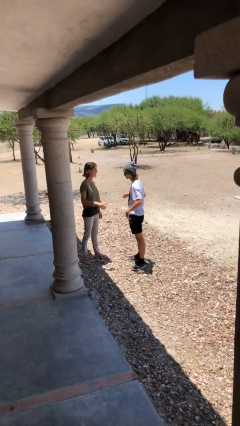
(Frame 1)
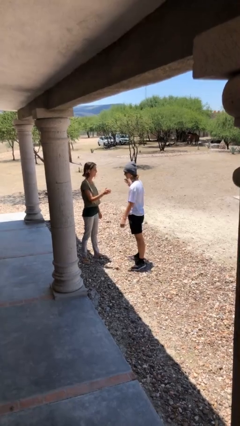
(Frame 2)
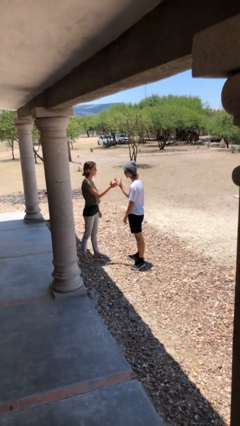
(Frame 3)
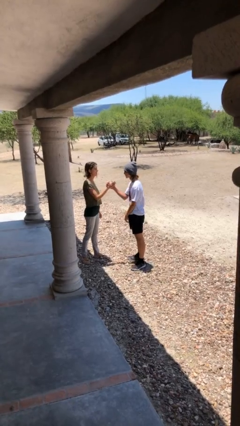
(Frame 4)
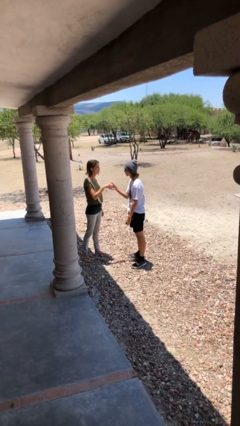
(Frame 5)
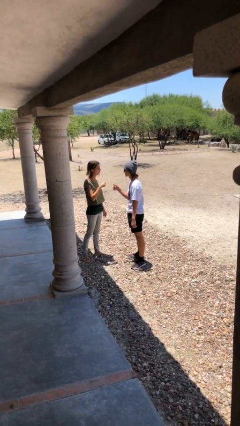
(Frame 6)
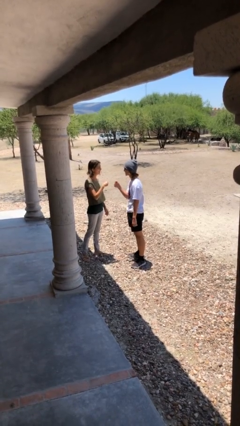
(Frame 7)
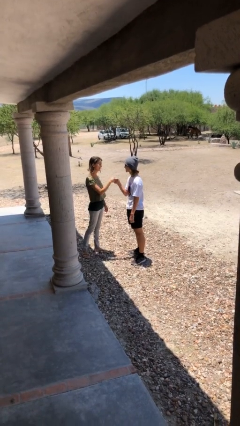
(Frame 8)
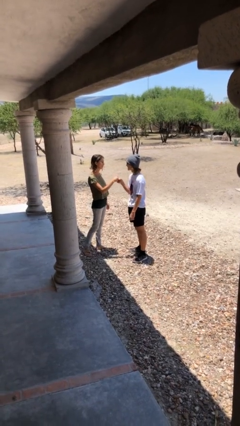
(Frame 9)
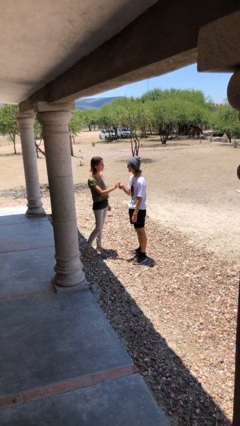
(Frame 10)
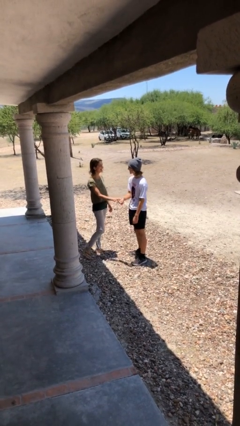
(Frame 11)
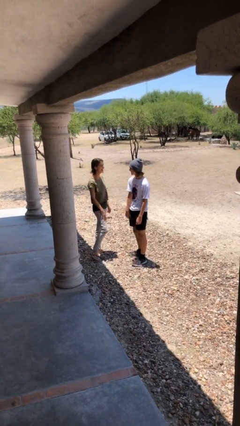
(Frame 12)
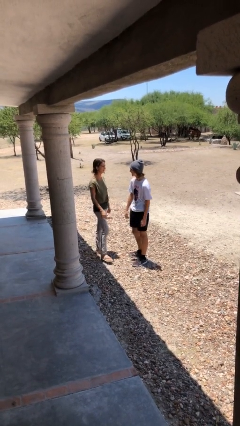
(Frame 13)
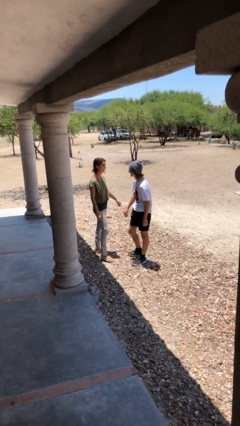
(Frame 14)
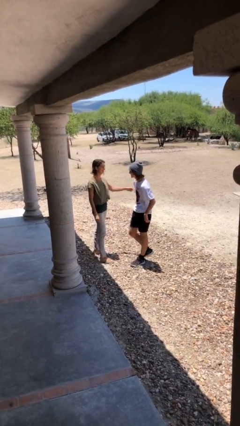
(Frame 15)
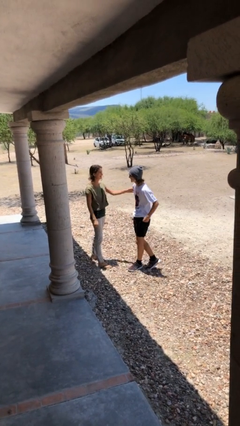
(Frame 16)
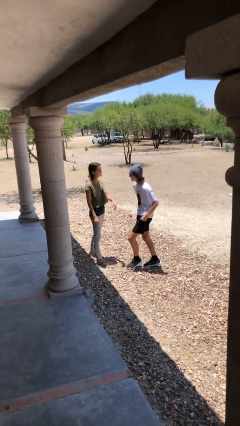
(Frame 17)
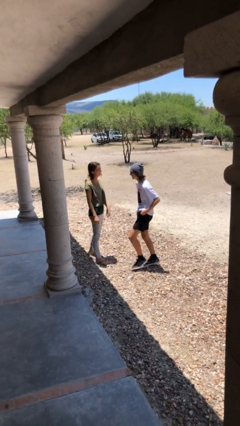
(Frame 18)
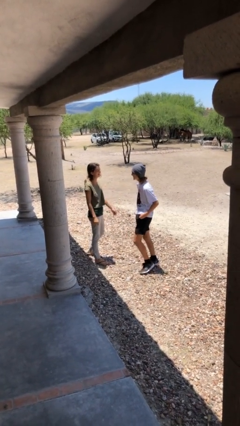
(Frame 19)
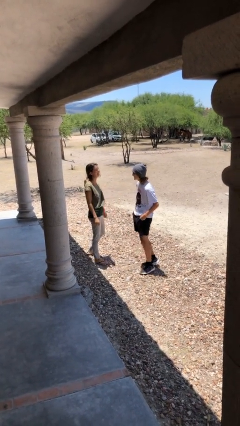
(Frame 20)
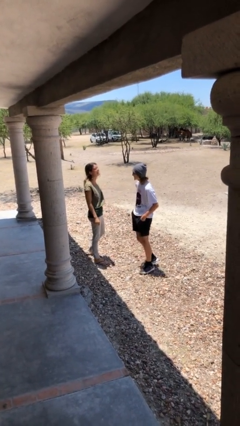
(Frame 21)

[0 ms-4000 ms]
person highfives hand

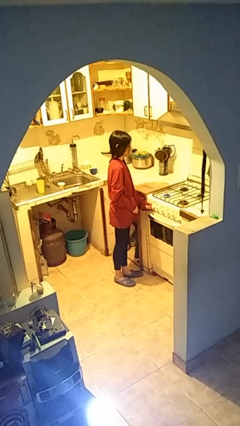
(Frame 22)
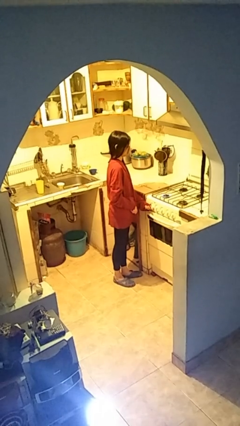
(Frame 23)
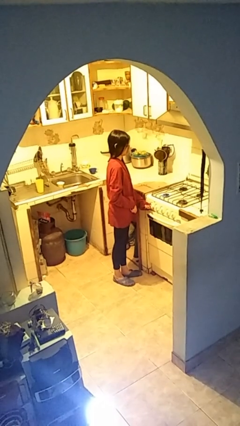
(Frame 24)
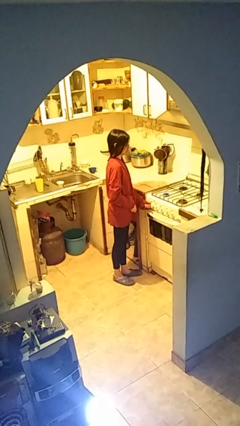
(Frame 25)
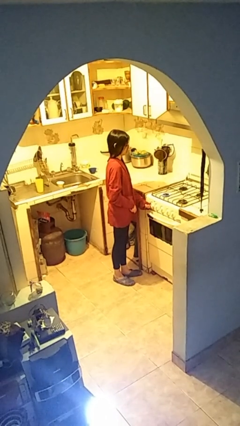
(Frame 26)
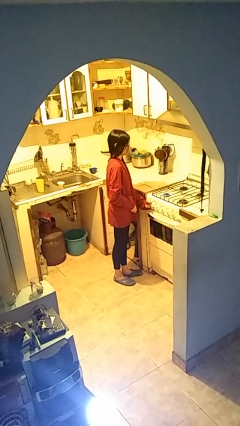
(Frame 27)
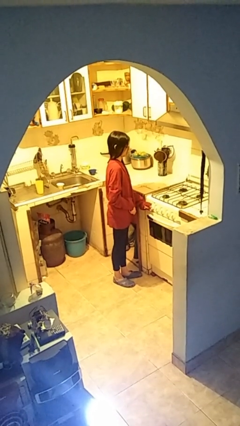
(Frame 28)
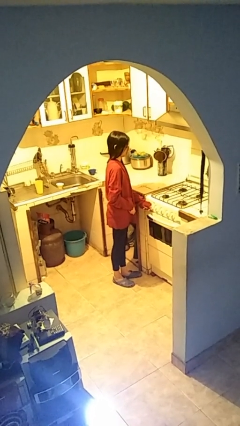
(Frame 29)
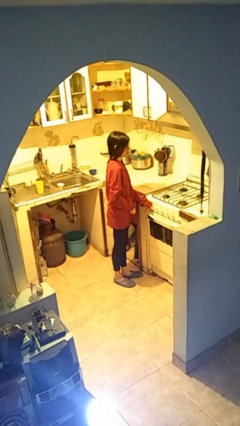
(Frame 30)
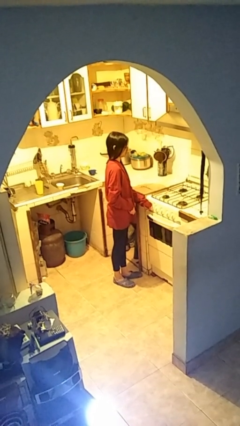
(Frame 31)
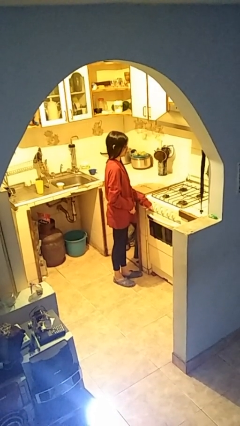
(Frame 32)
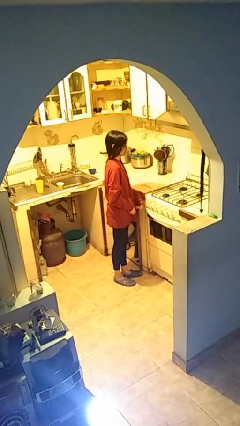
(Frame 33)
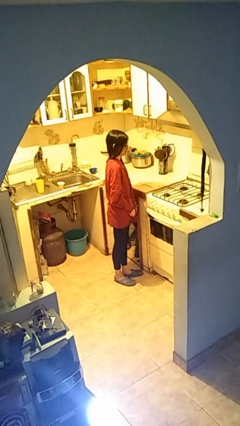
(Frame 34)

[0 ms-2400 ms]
person turns off stovetop

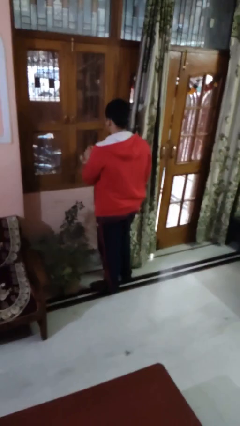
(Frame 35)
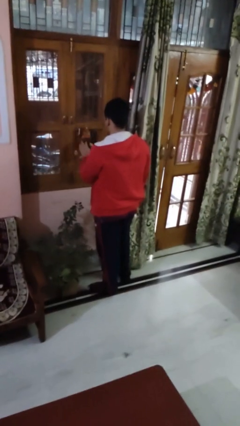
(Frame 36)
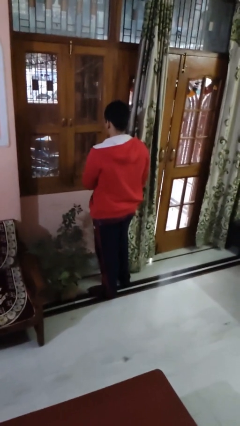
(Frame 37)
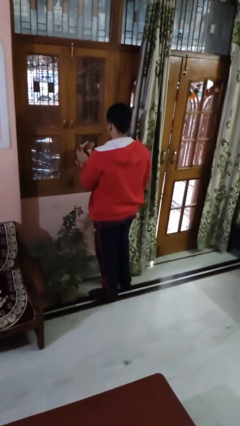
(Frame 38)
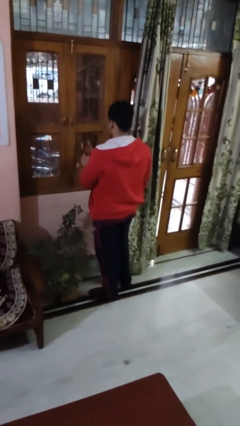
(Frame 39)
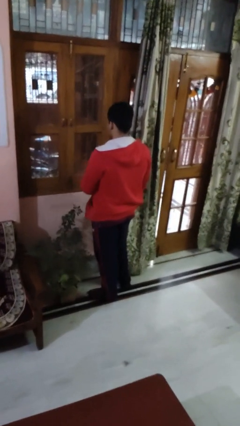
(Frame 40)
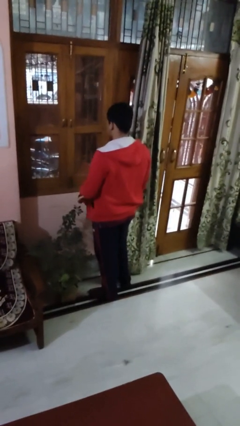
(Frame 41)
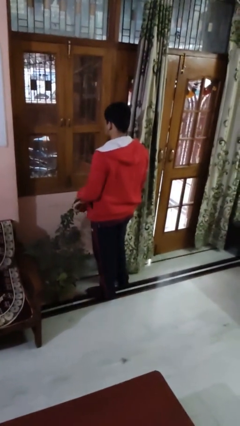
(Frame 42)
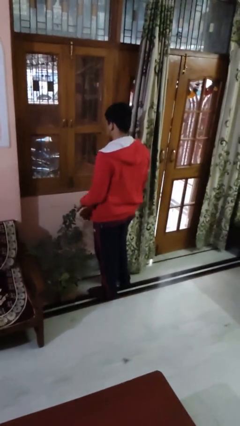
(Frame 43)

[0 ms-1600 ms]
person washes window

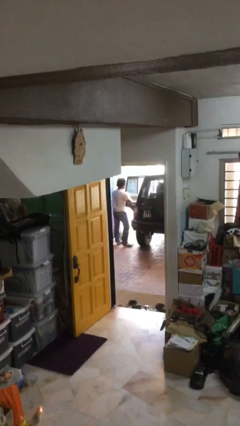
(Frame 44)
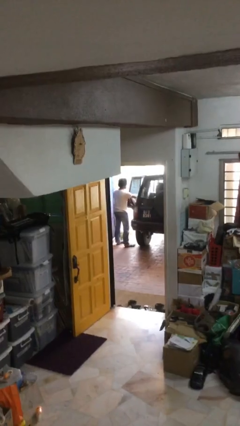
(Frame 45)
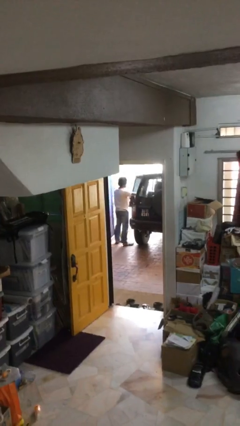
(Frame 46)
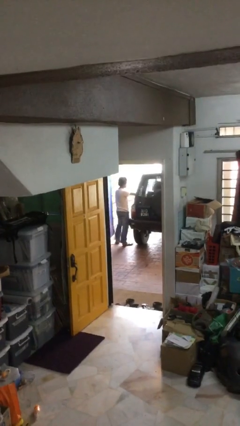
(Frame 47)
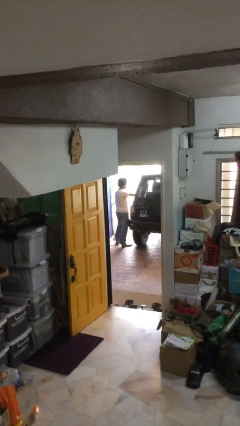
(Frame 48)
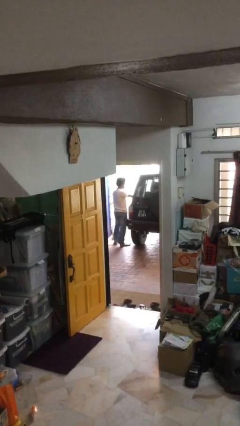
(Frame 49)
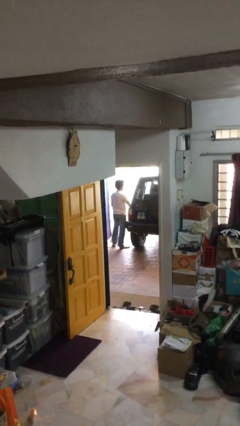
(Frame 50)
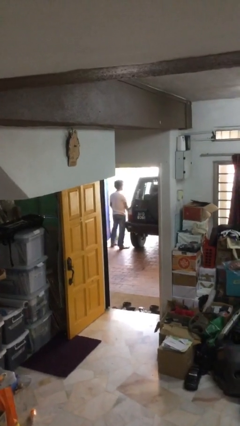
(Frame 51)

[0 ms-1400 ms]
person closes car door

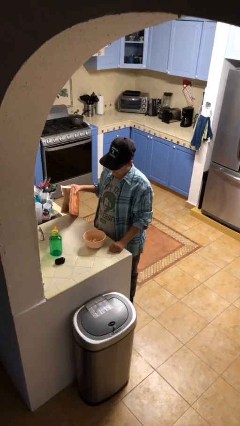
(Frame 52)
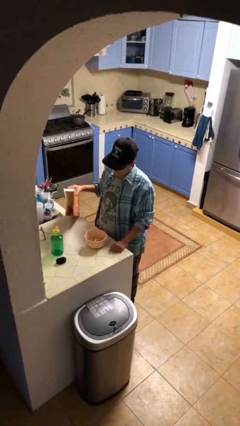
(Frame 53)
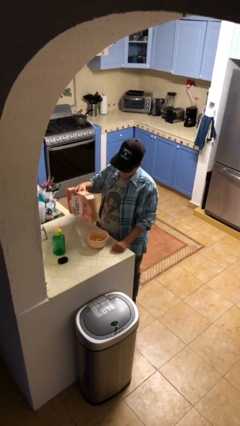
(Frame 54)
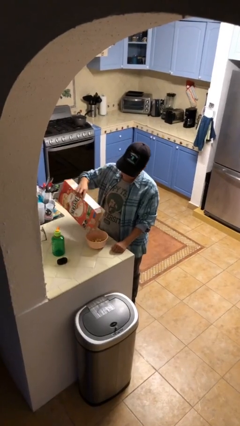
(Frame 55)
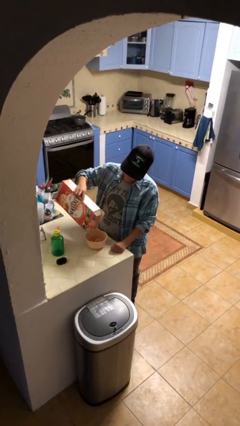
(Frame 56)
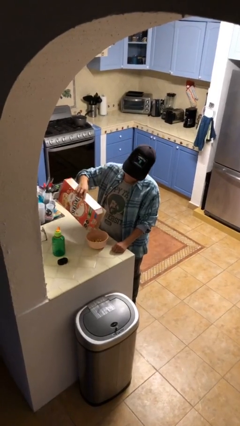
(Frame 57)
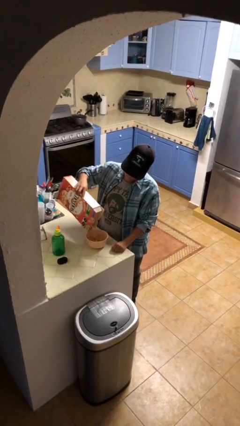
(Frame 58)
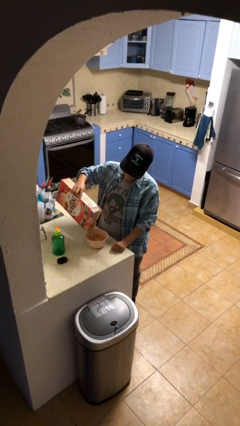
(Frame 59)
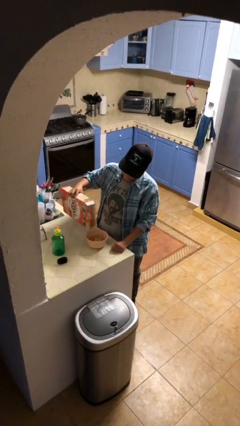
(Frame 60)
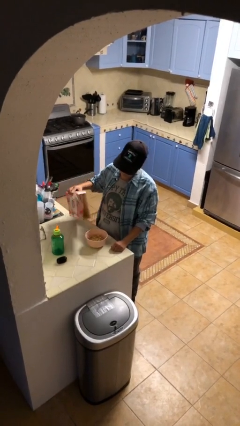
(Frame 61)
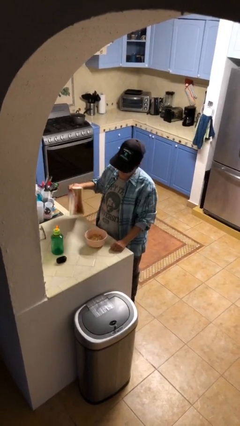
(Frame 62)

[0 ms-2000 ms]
person pours into bowl

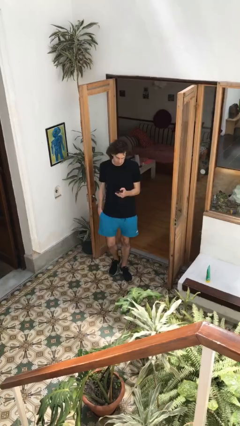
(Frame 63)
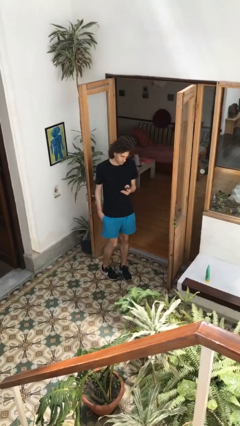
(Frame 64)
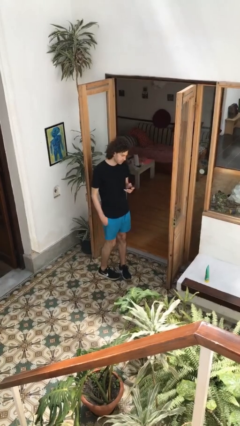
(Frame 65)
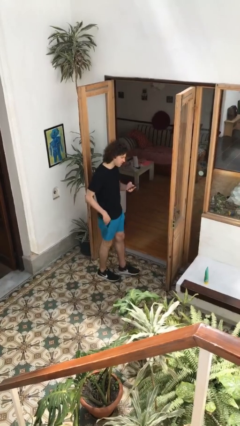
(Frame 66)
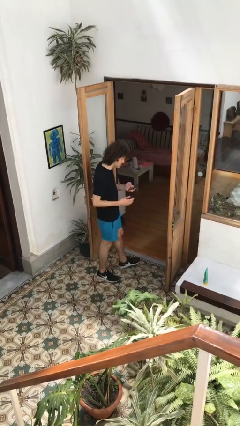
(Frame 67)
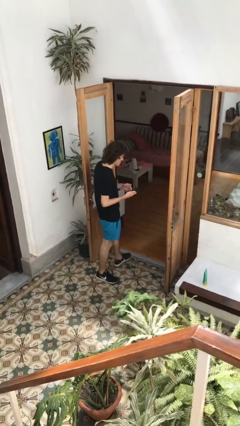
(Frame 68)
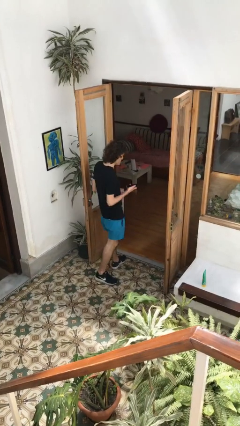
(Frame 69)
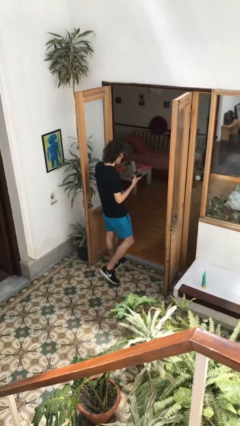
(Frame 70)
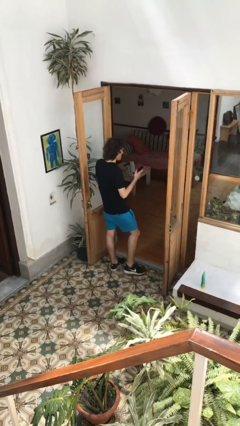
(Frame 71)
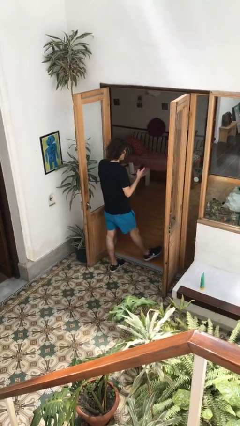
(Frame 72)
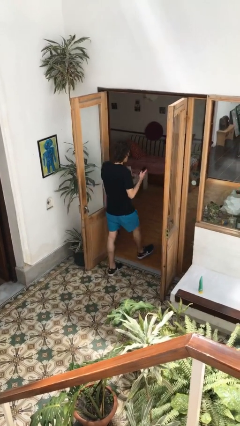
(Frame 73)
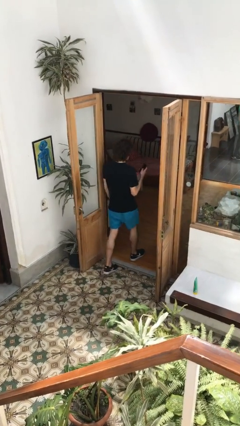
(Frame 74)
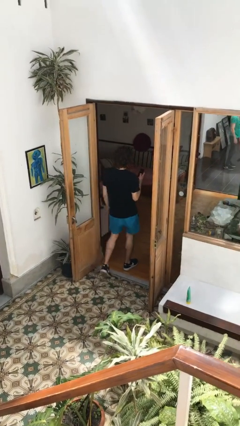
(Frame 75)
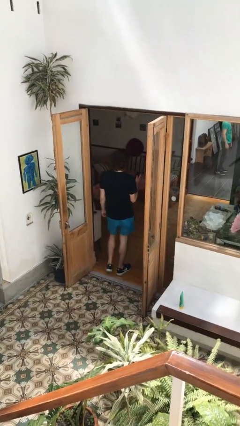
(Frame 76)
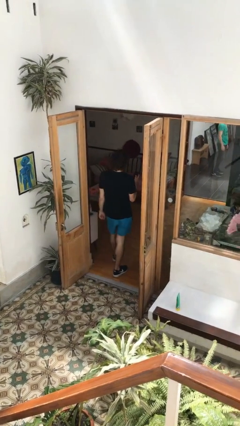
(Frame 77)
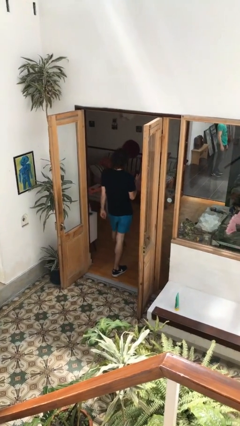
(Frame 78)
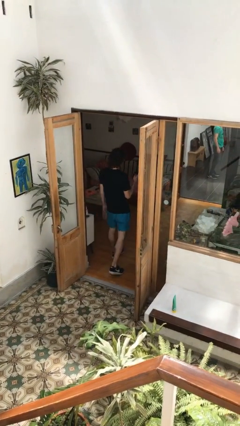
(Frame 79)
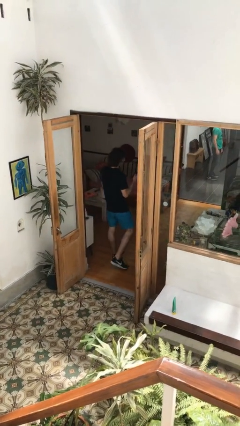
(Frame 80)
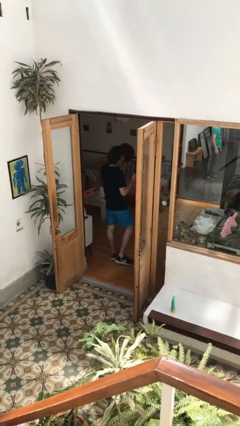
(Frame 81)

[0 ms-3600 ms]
person exits scene through structure

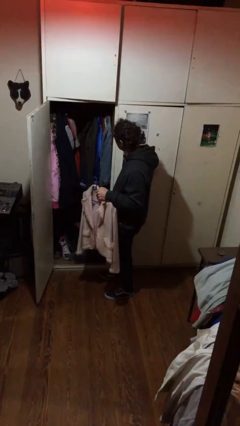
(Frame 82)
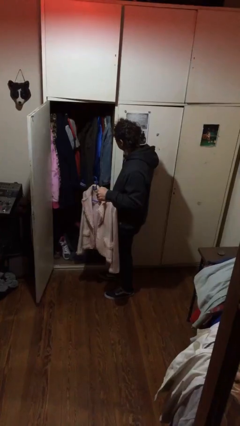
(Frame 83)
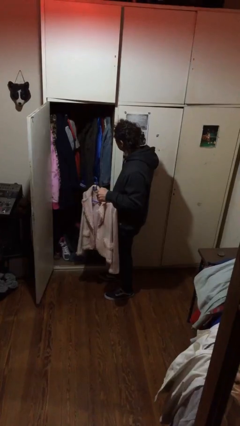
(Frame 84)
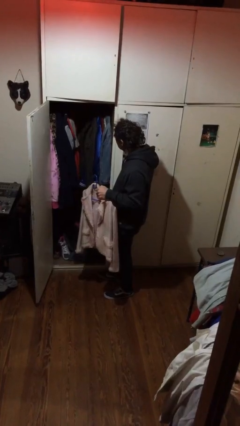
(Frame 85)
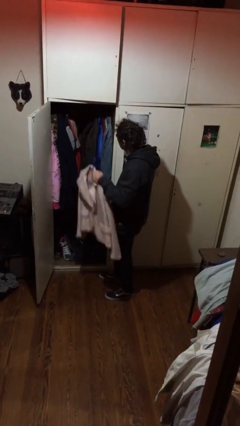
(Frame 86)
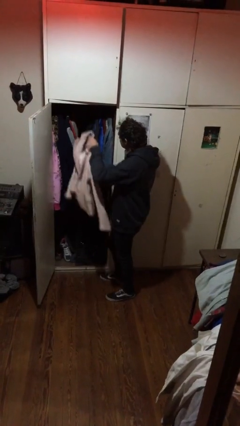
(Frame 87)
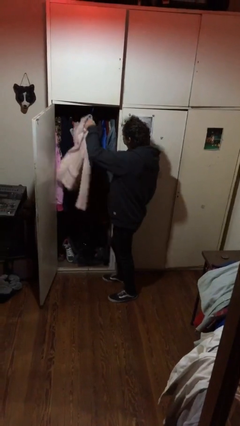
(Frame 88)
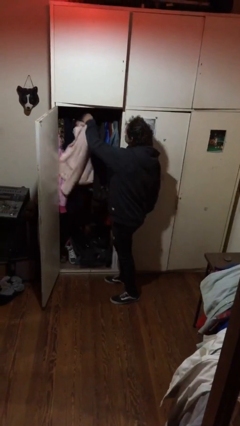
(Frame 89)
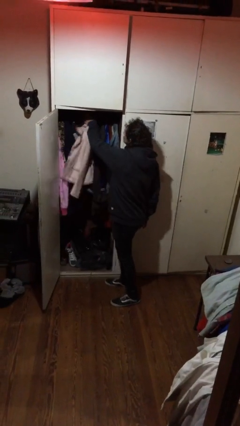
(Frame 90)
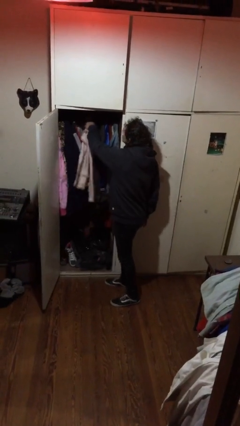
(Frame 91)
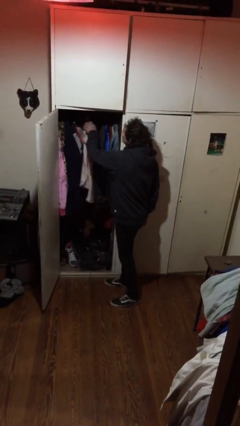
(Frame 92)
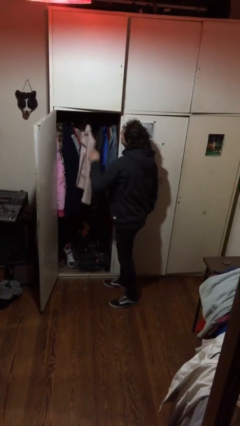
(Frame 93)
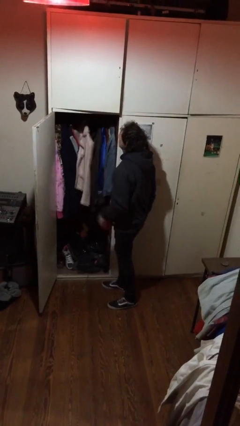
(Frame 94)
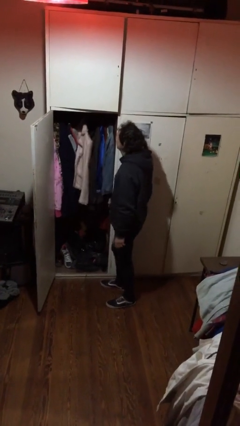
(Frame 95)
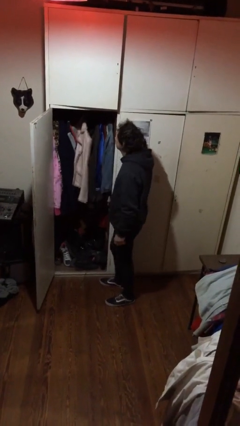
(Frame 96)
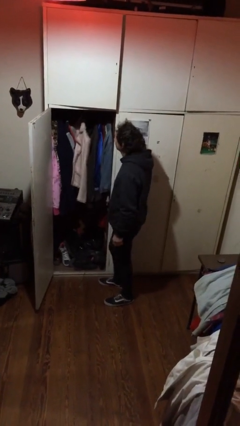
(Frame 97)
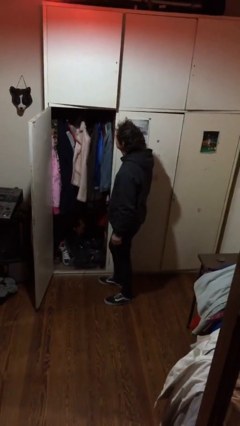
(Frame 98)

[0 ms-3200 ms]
person puts clothes into closet
